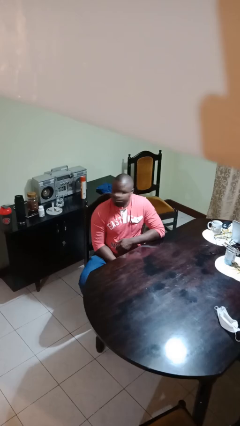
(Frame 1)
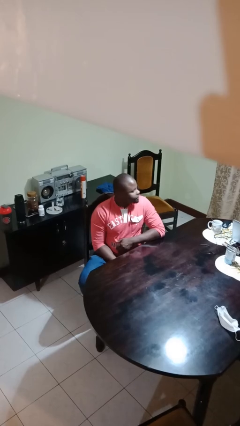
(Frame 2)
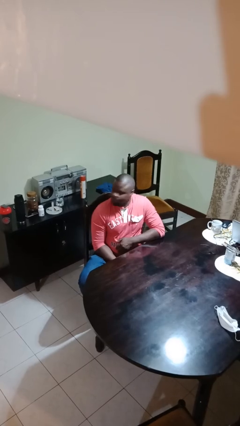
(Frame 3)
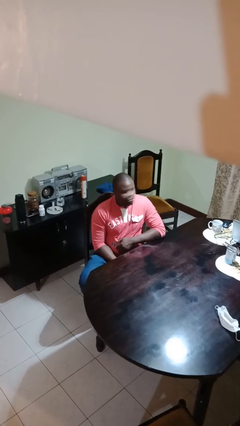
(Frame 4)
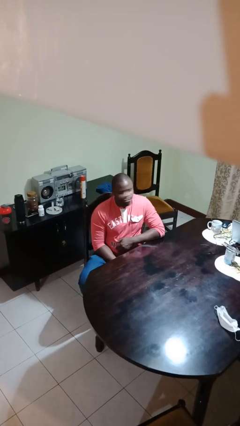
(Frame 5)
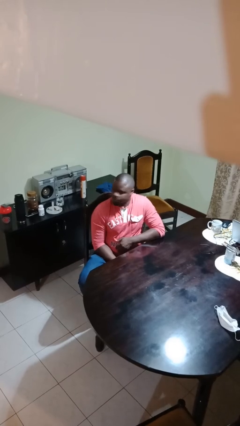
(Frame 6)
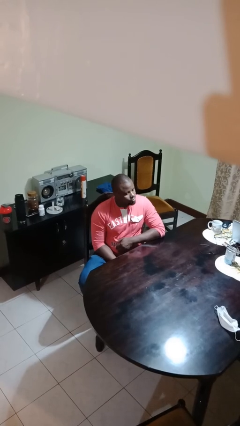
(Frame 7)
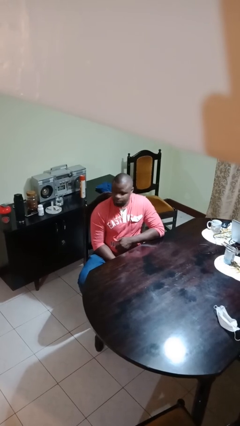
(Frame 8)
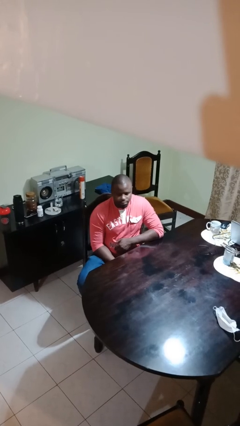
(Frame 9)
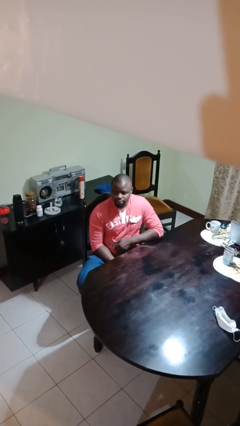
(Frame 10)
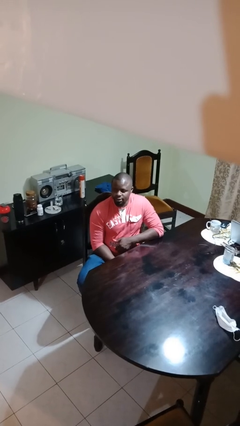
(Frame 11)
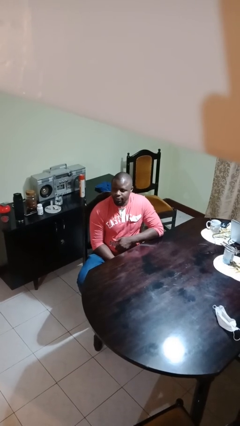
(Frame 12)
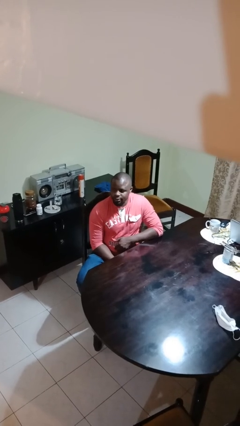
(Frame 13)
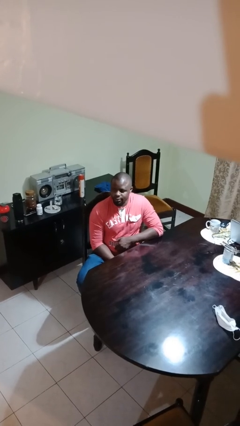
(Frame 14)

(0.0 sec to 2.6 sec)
person shakes head

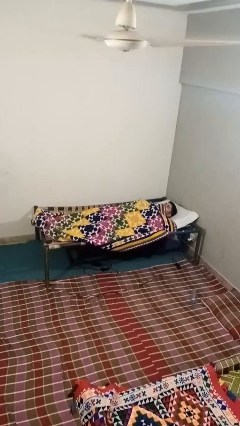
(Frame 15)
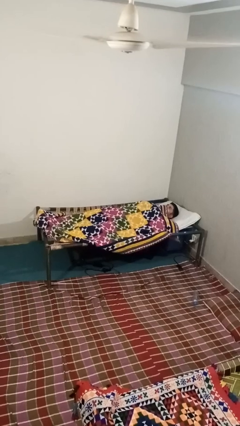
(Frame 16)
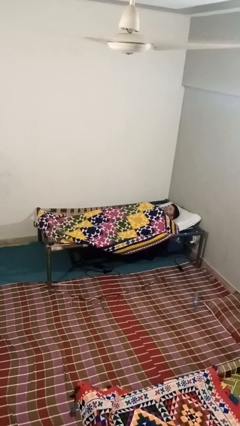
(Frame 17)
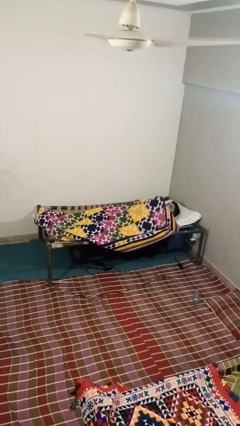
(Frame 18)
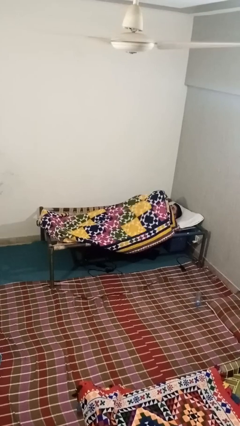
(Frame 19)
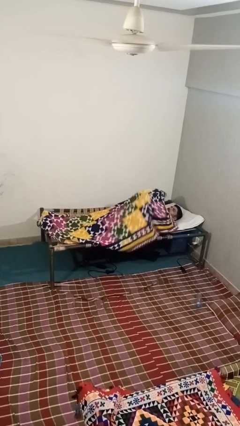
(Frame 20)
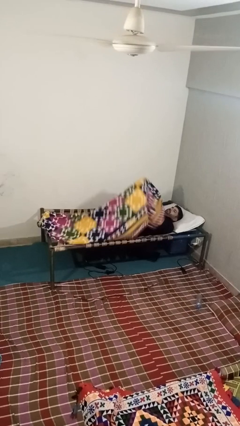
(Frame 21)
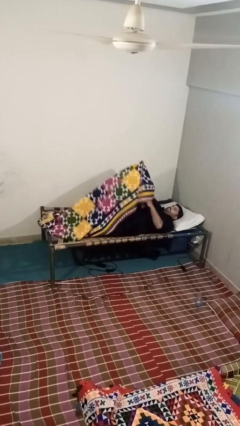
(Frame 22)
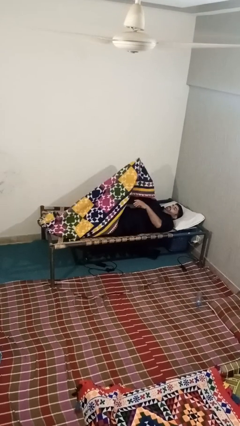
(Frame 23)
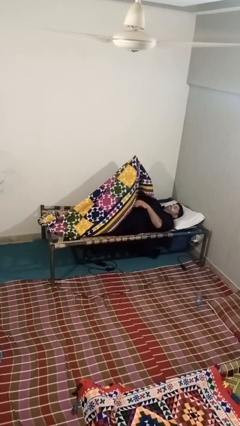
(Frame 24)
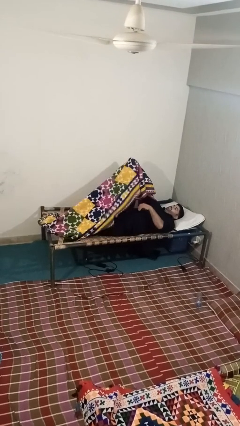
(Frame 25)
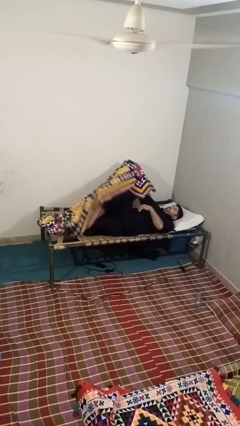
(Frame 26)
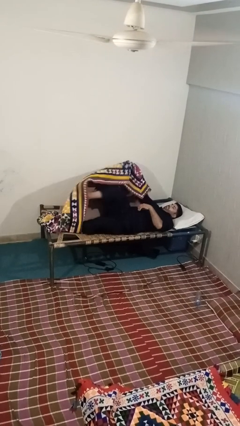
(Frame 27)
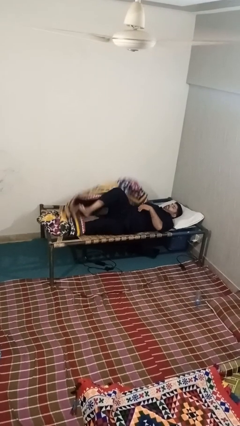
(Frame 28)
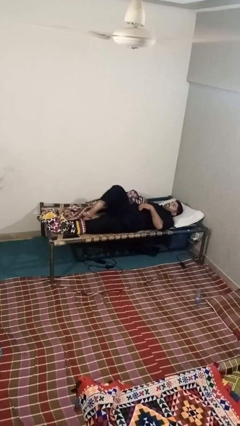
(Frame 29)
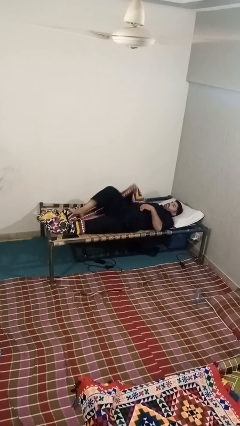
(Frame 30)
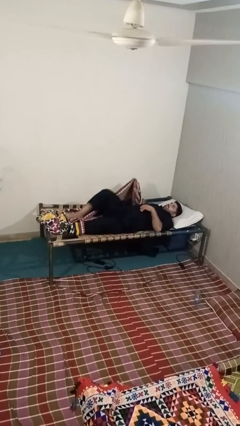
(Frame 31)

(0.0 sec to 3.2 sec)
person uncovers with blanket

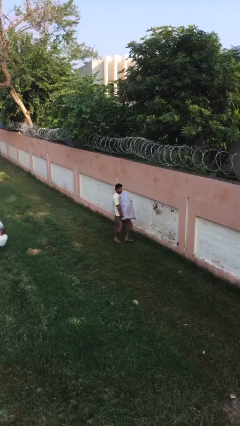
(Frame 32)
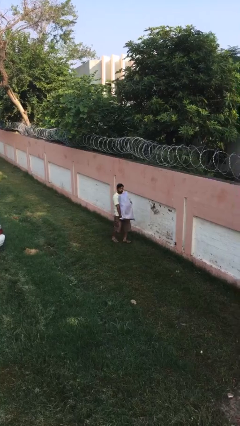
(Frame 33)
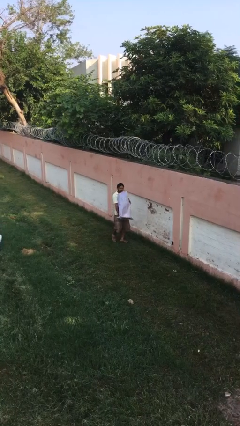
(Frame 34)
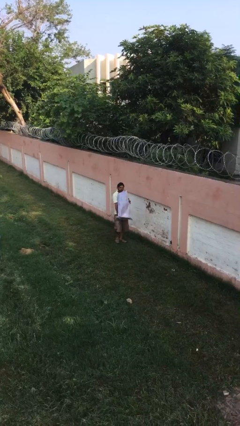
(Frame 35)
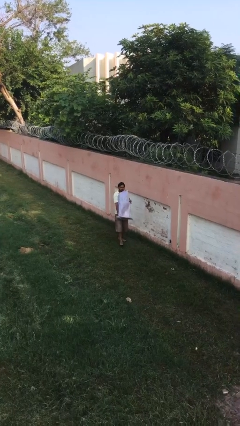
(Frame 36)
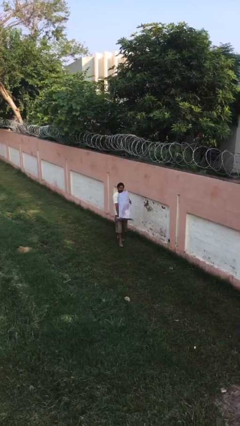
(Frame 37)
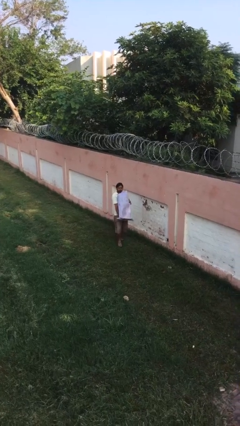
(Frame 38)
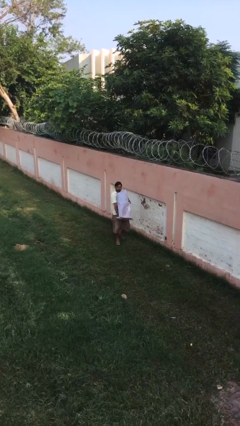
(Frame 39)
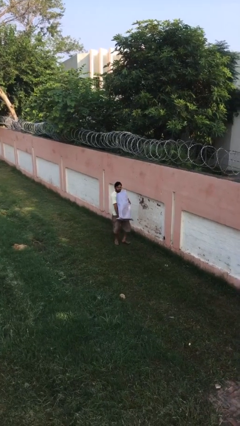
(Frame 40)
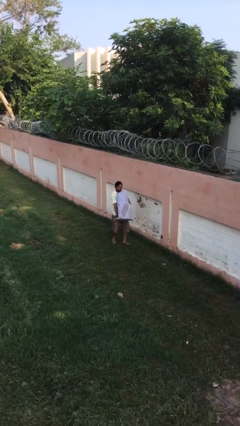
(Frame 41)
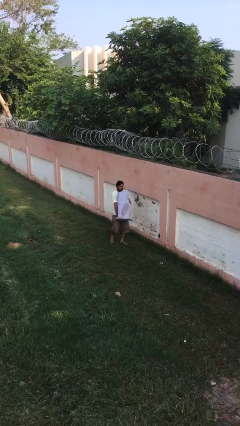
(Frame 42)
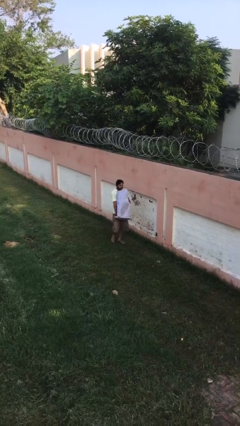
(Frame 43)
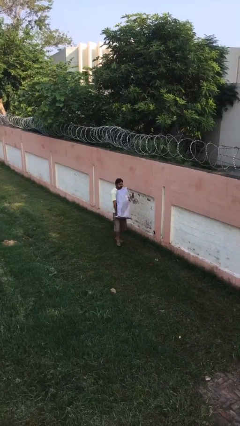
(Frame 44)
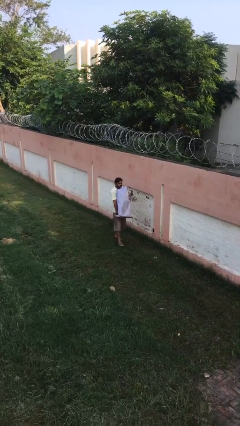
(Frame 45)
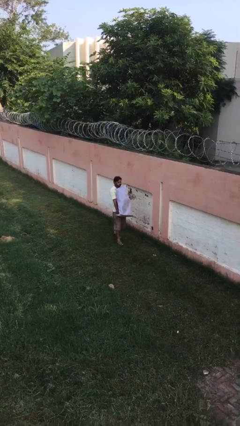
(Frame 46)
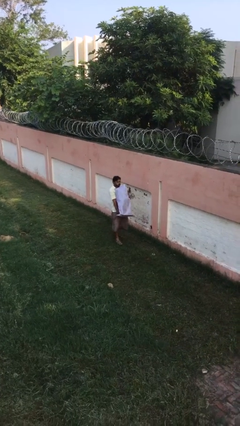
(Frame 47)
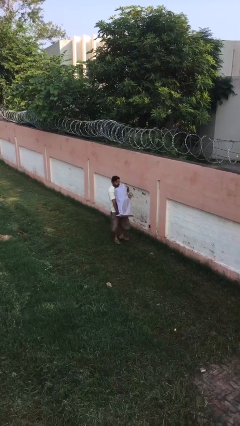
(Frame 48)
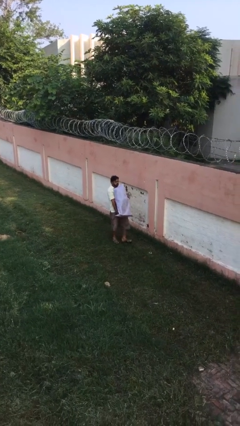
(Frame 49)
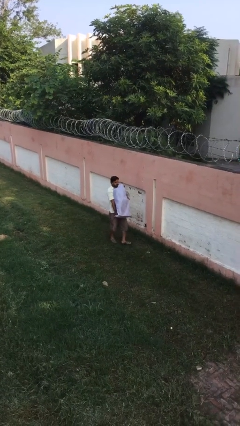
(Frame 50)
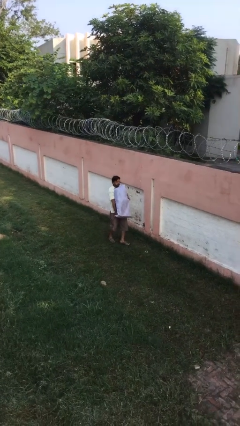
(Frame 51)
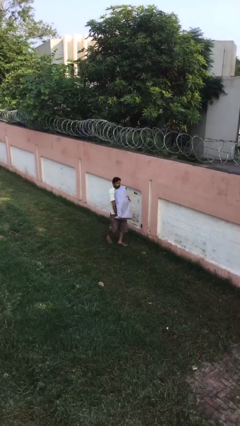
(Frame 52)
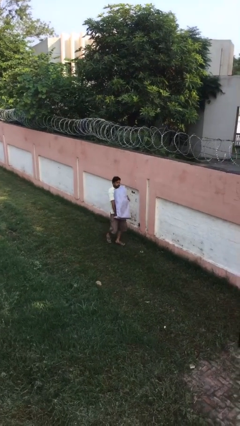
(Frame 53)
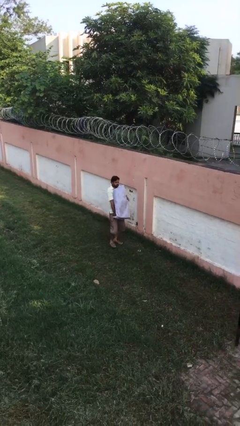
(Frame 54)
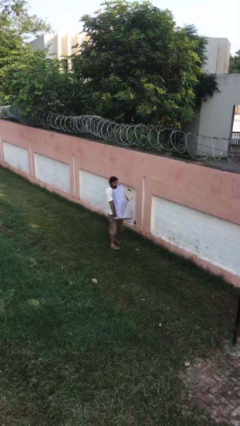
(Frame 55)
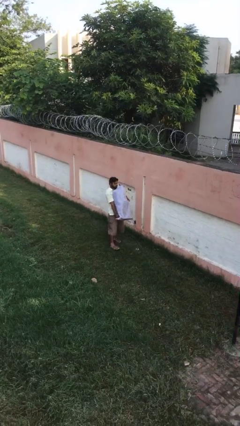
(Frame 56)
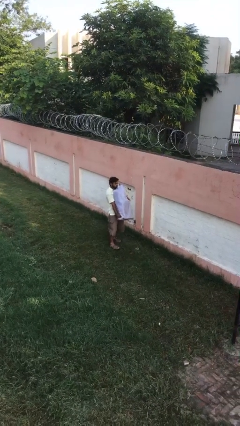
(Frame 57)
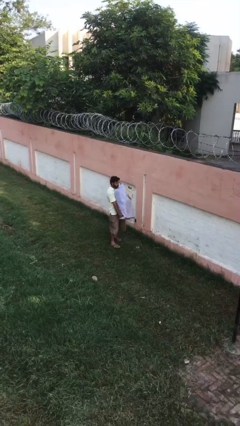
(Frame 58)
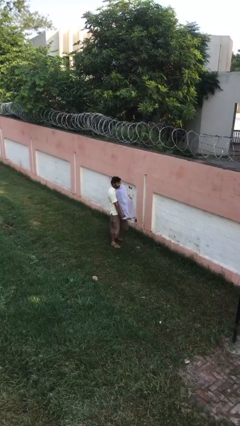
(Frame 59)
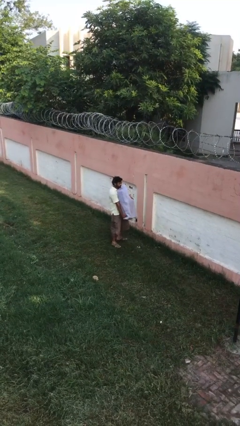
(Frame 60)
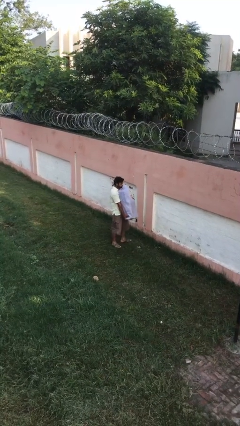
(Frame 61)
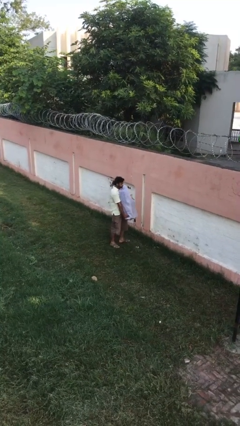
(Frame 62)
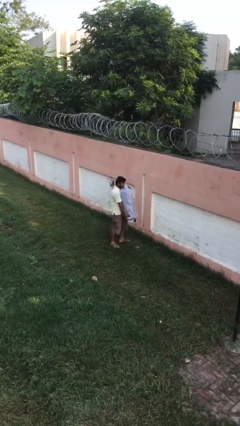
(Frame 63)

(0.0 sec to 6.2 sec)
person carries heavy object

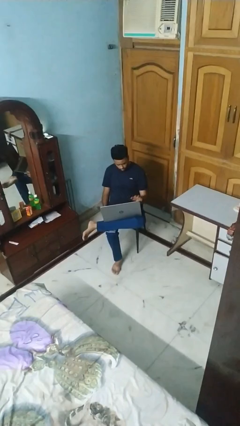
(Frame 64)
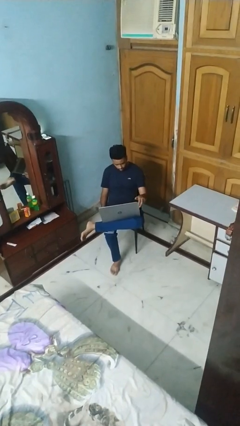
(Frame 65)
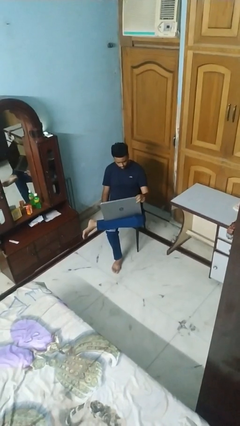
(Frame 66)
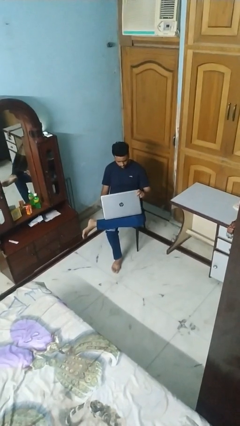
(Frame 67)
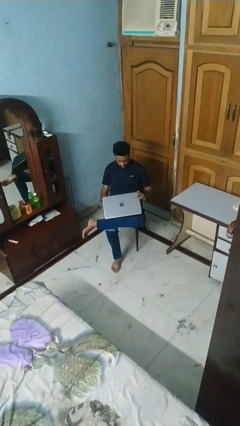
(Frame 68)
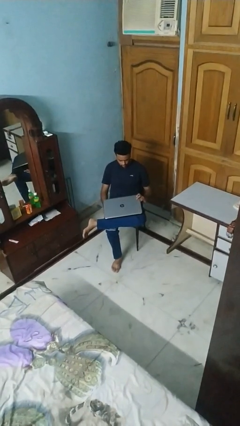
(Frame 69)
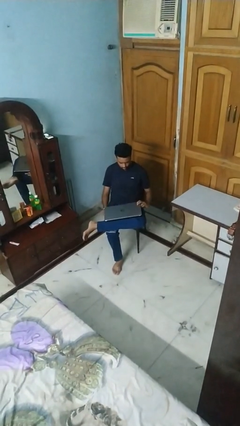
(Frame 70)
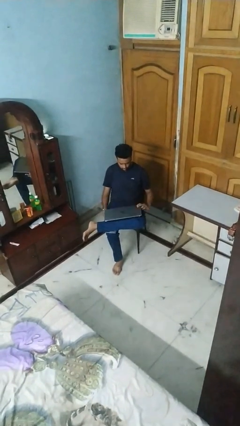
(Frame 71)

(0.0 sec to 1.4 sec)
person closes laptop

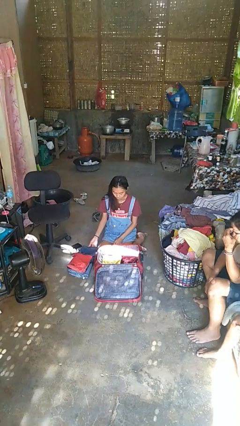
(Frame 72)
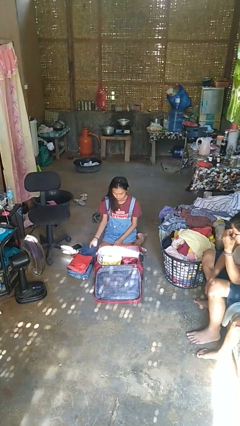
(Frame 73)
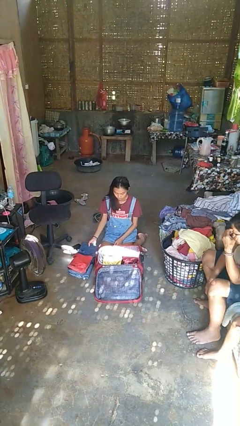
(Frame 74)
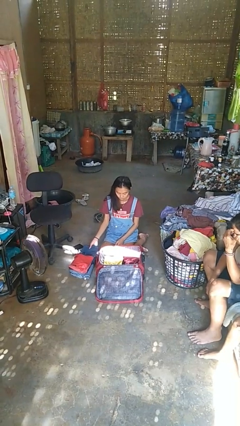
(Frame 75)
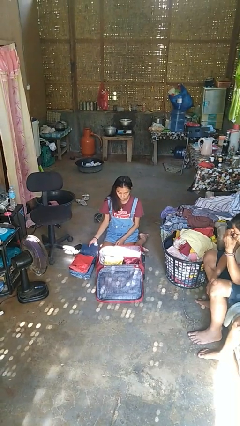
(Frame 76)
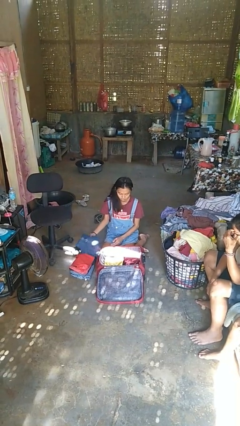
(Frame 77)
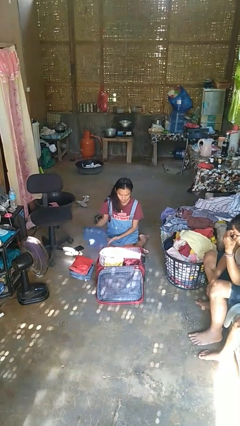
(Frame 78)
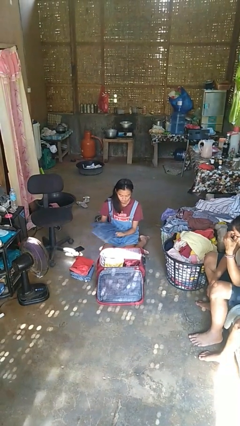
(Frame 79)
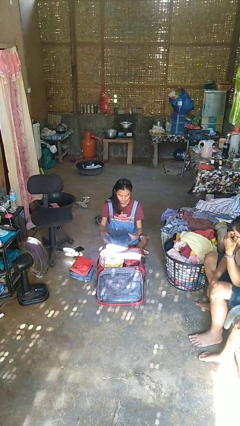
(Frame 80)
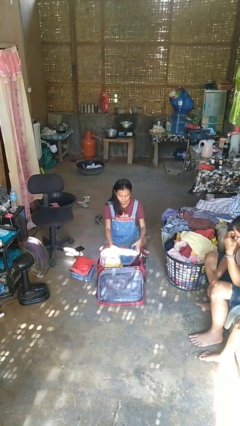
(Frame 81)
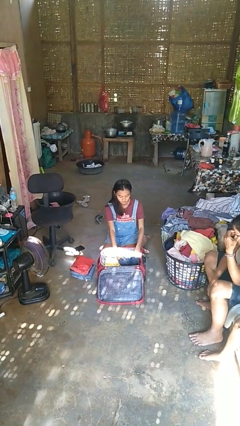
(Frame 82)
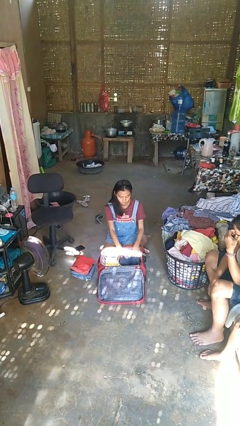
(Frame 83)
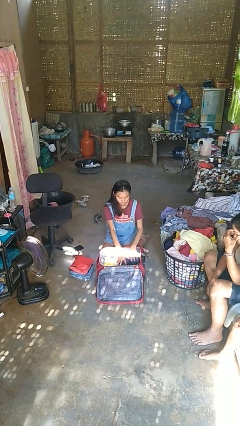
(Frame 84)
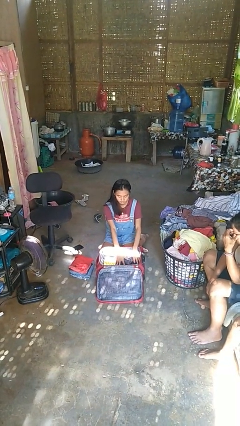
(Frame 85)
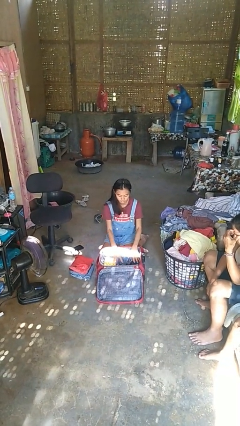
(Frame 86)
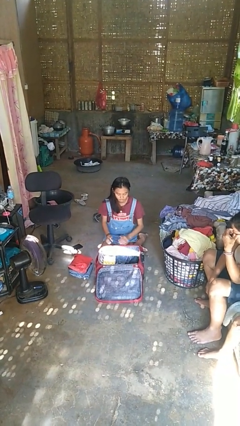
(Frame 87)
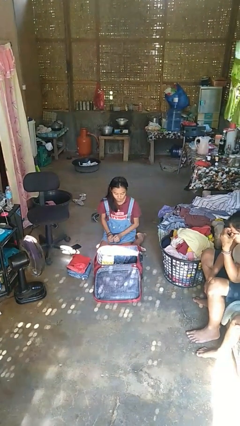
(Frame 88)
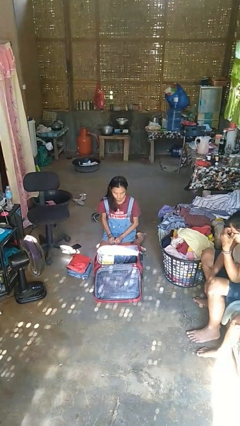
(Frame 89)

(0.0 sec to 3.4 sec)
person loads clothes into suitcase

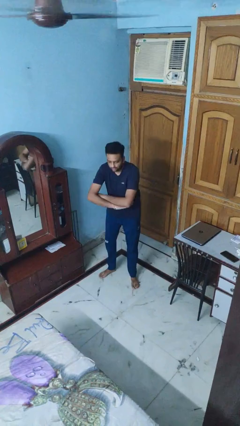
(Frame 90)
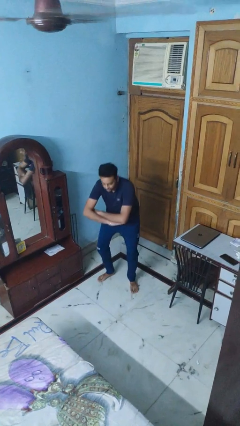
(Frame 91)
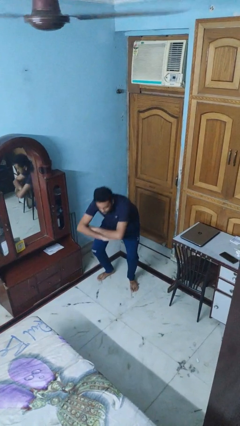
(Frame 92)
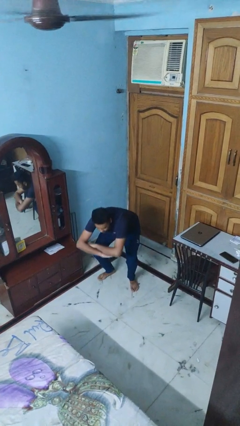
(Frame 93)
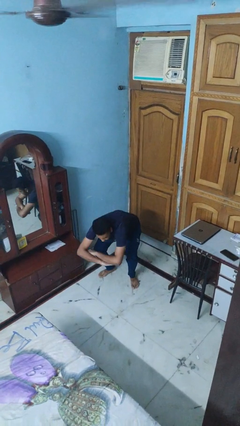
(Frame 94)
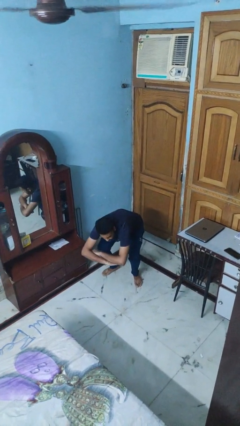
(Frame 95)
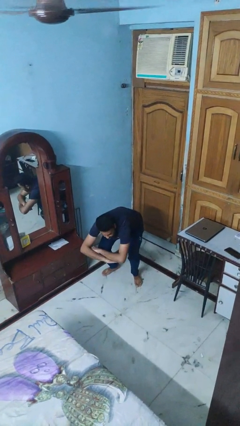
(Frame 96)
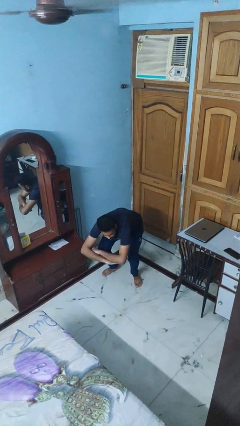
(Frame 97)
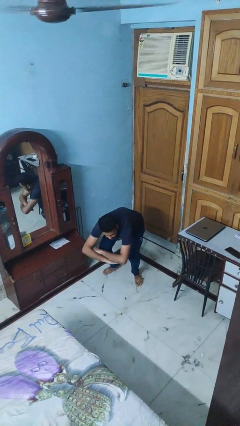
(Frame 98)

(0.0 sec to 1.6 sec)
person squats
